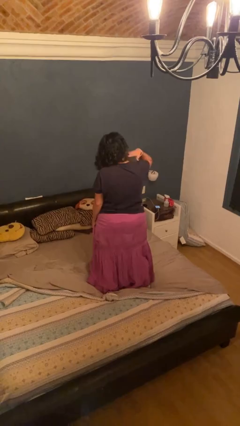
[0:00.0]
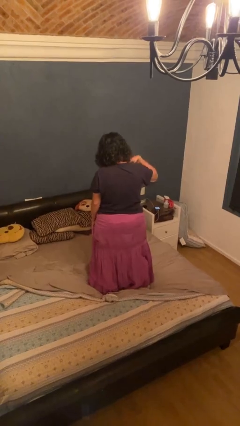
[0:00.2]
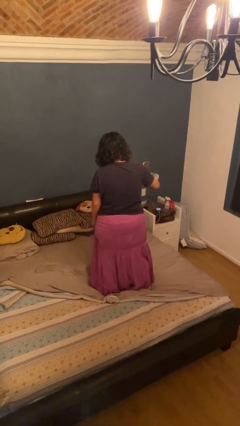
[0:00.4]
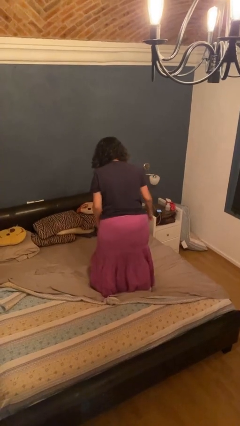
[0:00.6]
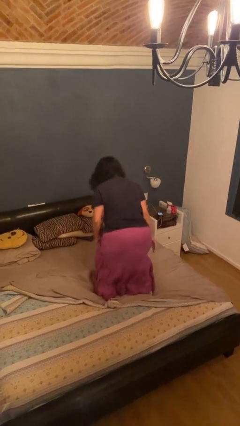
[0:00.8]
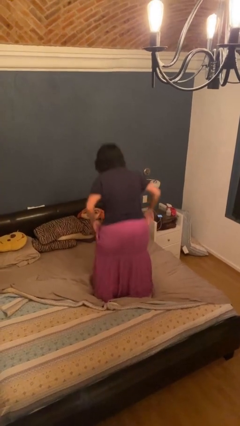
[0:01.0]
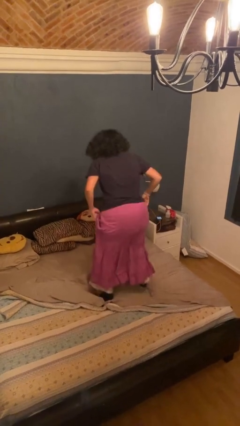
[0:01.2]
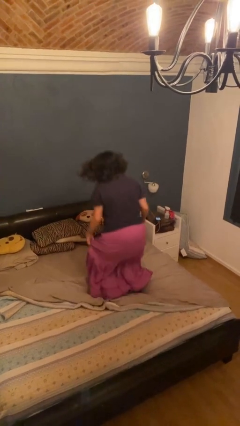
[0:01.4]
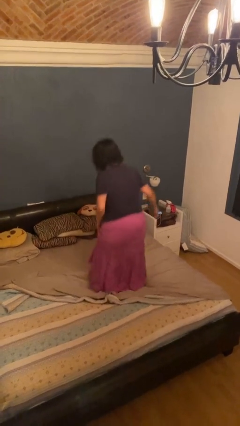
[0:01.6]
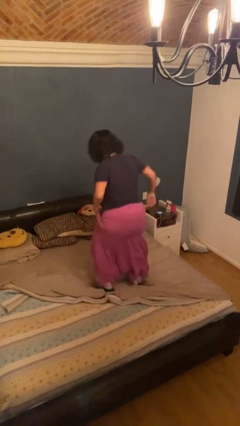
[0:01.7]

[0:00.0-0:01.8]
person jumps on bed

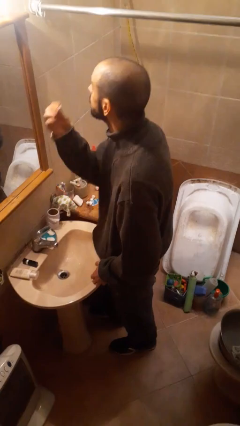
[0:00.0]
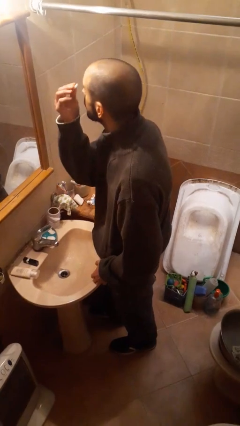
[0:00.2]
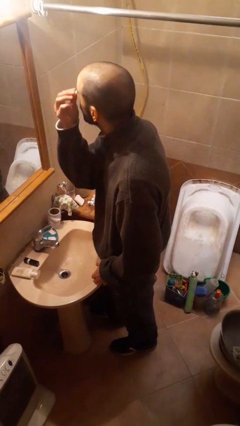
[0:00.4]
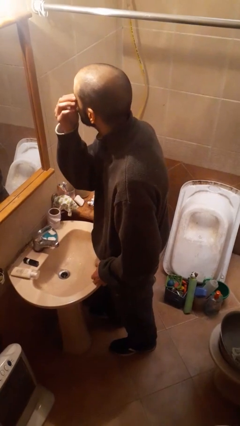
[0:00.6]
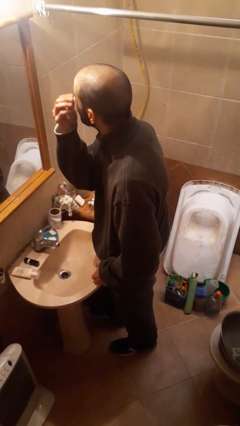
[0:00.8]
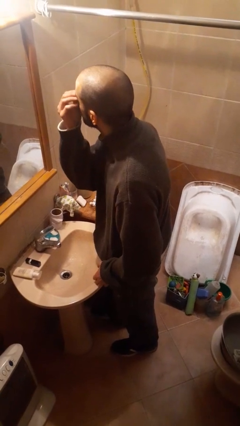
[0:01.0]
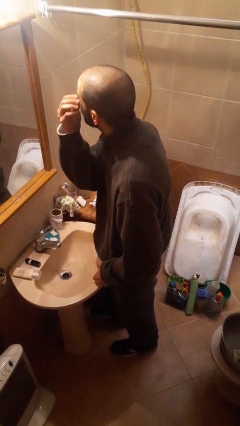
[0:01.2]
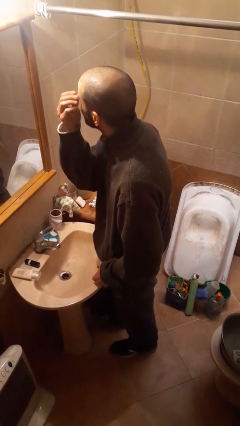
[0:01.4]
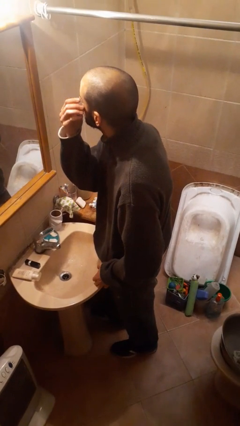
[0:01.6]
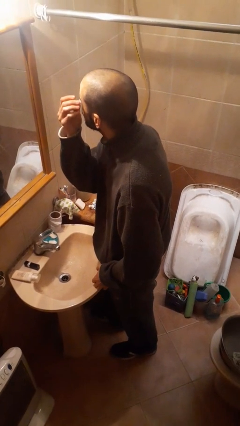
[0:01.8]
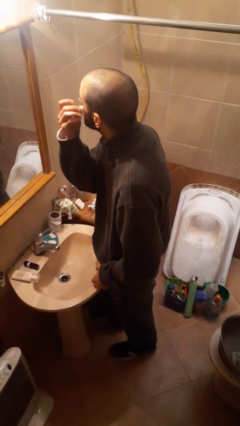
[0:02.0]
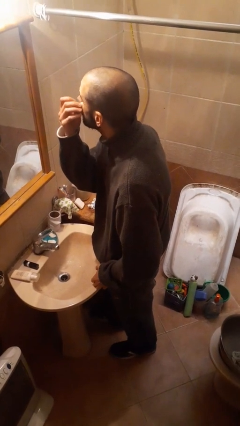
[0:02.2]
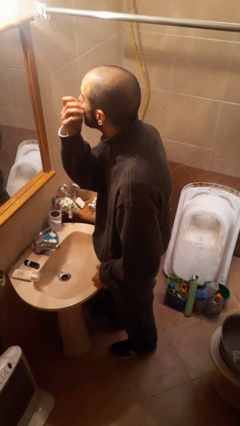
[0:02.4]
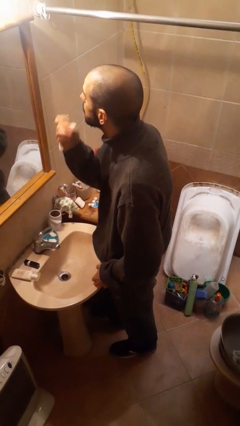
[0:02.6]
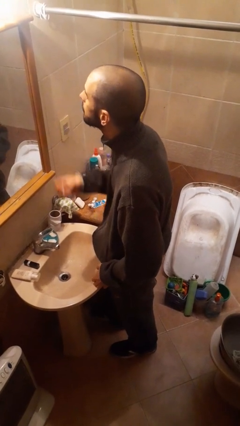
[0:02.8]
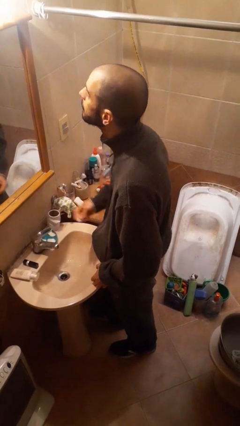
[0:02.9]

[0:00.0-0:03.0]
person applies eye makeup

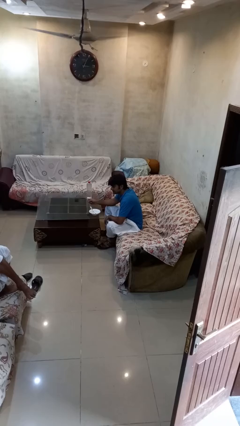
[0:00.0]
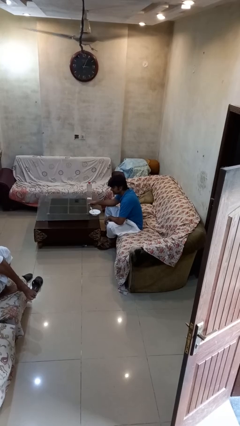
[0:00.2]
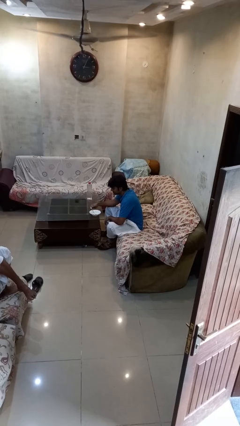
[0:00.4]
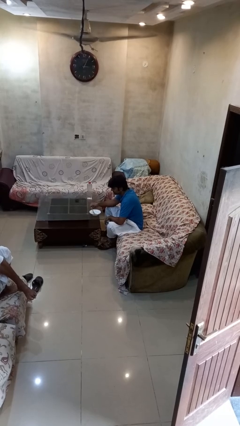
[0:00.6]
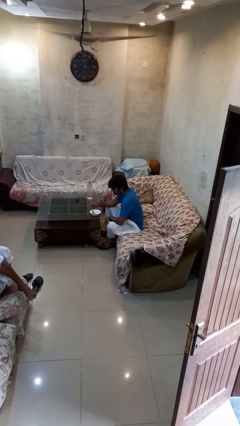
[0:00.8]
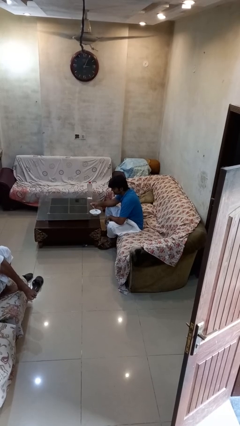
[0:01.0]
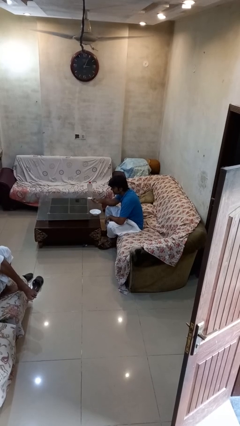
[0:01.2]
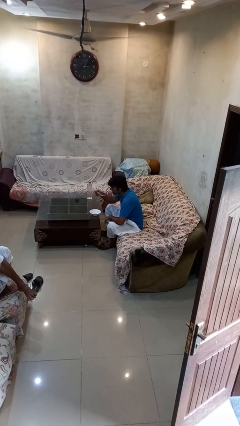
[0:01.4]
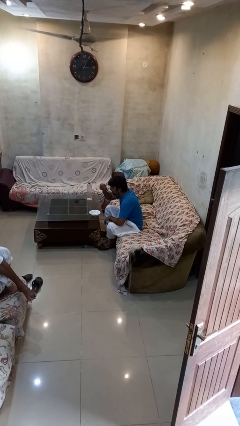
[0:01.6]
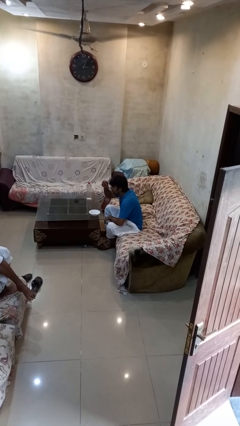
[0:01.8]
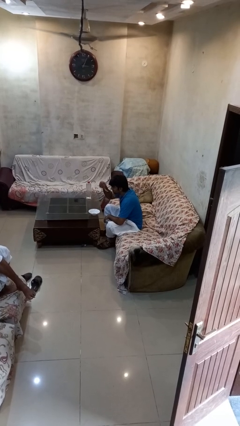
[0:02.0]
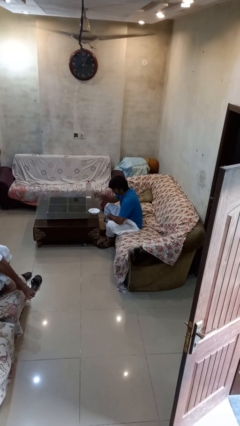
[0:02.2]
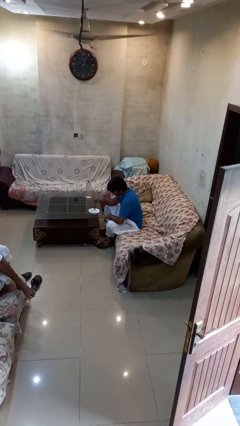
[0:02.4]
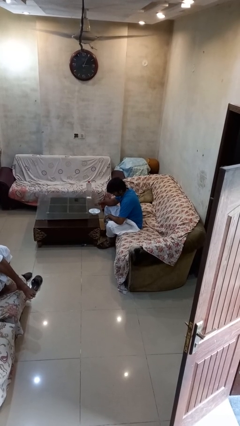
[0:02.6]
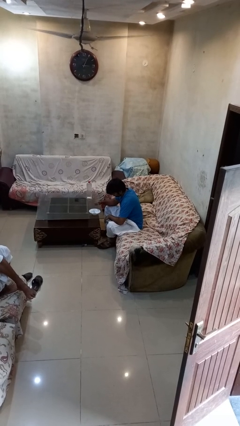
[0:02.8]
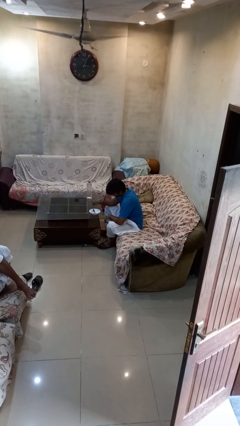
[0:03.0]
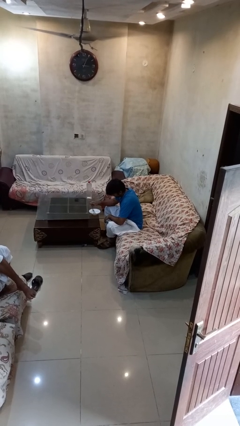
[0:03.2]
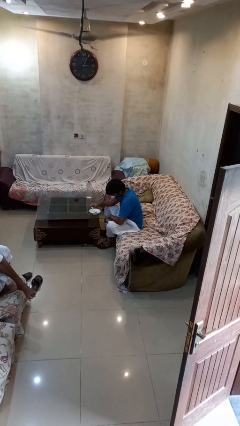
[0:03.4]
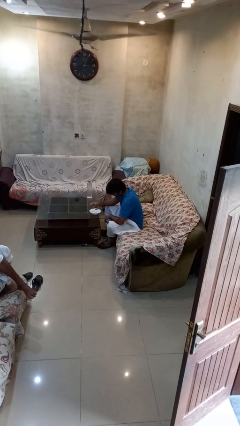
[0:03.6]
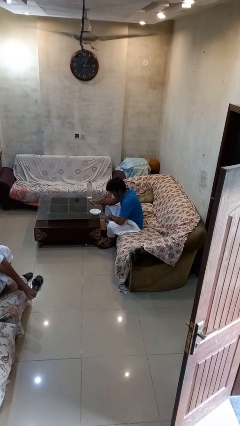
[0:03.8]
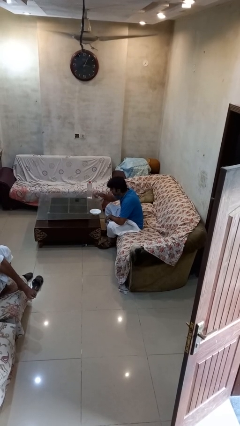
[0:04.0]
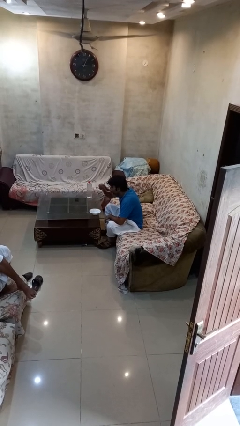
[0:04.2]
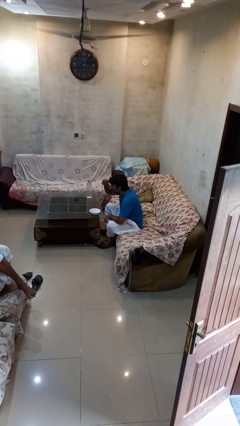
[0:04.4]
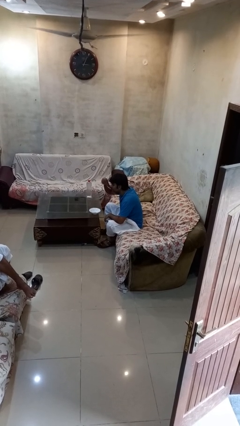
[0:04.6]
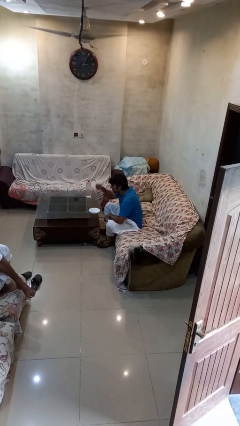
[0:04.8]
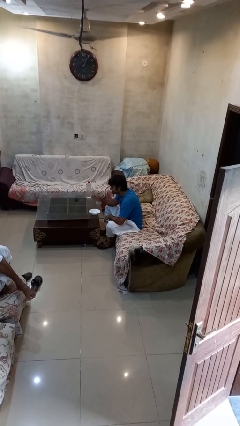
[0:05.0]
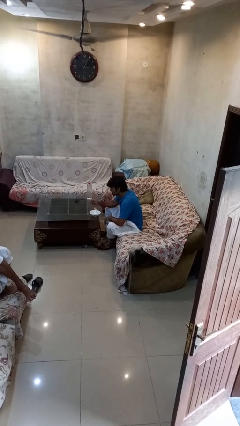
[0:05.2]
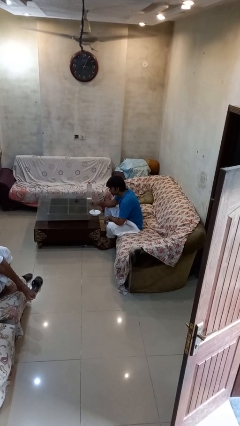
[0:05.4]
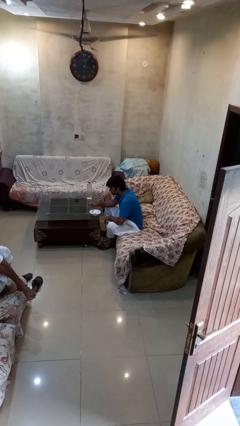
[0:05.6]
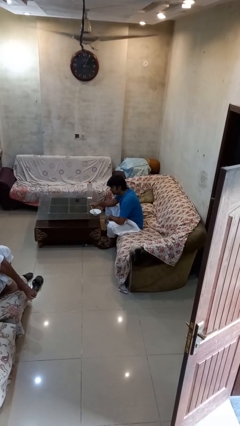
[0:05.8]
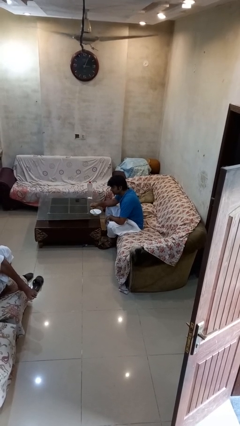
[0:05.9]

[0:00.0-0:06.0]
person eats with utensil

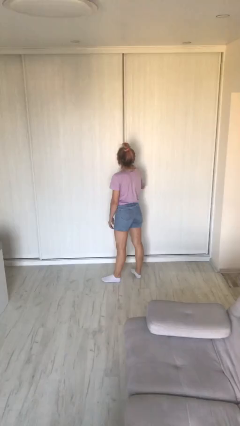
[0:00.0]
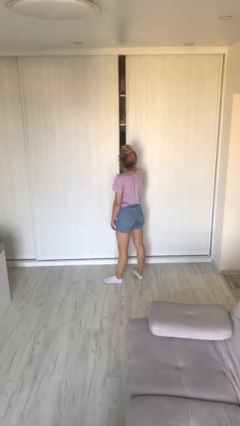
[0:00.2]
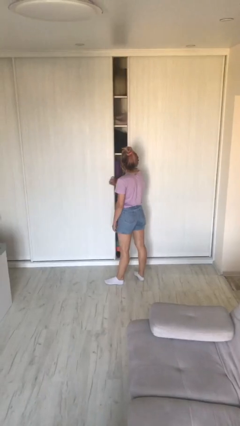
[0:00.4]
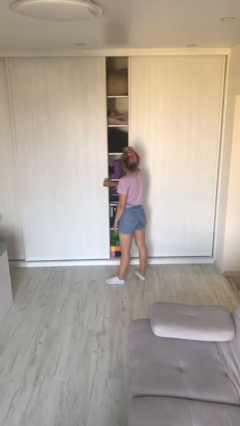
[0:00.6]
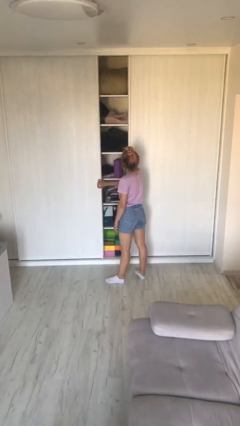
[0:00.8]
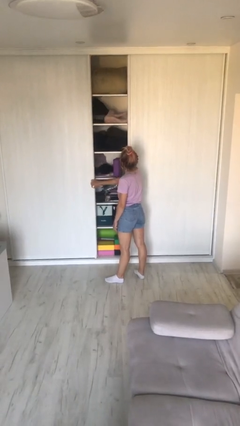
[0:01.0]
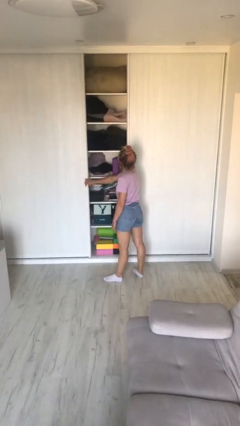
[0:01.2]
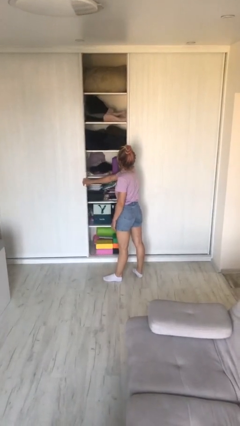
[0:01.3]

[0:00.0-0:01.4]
person opens sliding door

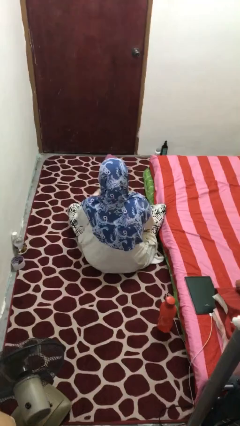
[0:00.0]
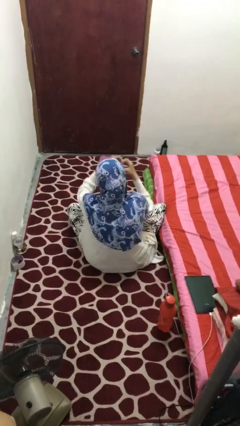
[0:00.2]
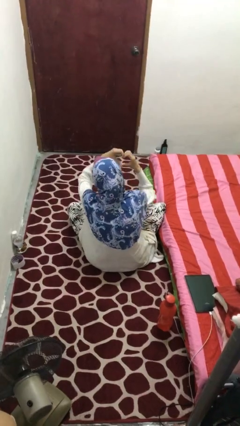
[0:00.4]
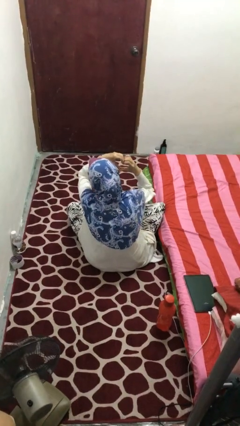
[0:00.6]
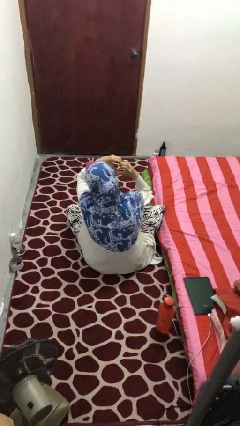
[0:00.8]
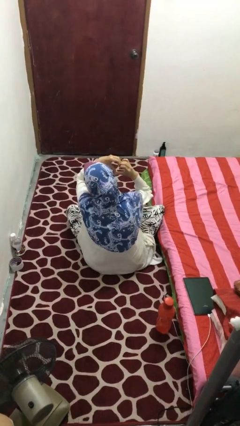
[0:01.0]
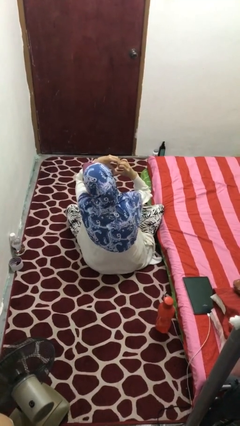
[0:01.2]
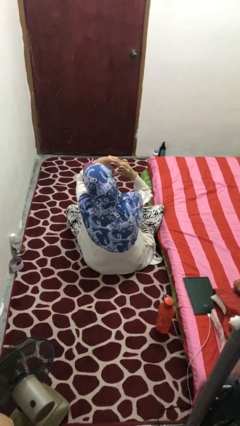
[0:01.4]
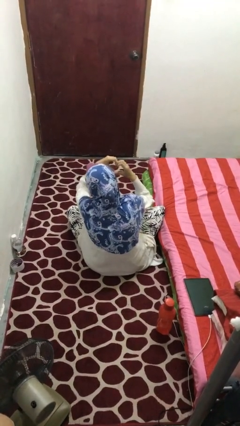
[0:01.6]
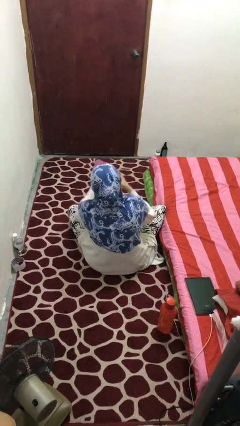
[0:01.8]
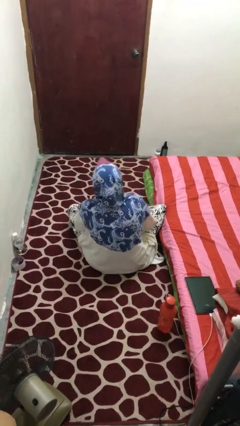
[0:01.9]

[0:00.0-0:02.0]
person gestures heart

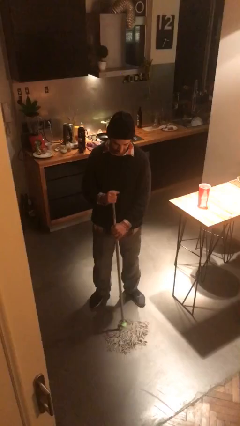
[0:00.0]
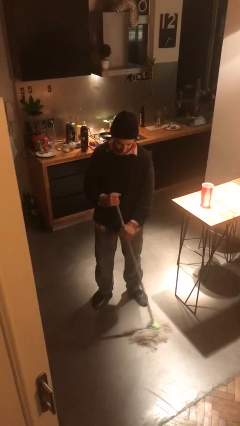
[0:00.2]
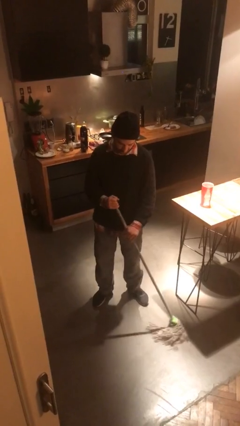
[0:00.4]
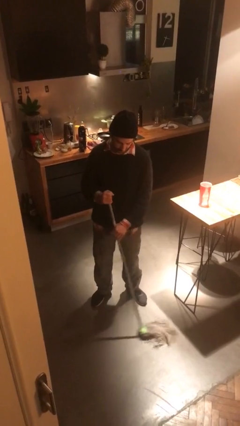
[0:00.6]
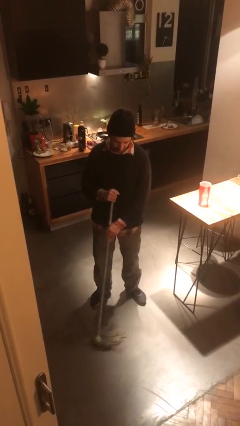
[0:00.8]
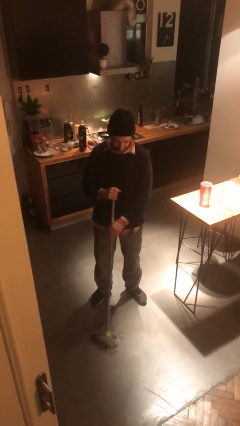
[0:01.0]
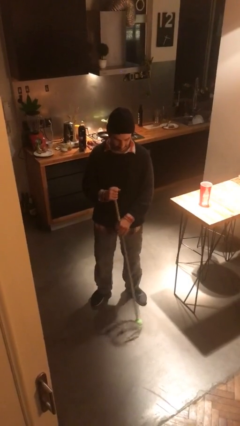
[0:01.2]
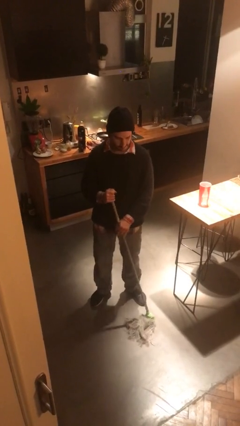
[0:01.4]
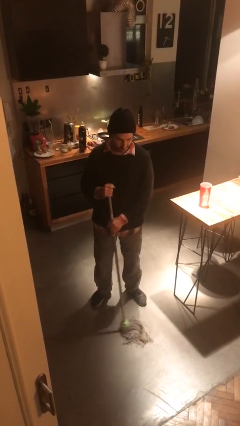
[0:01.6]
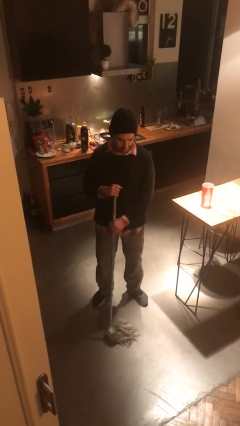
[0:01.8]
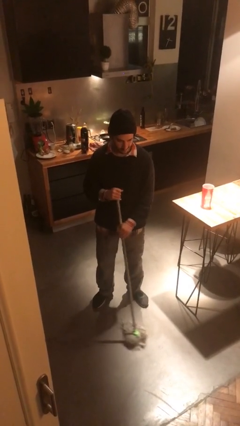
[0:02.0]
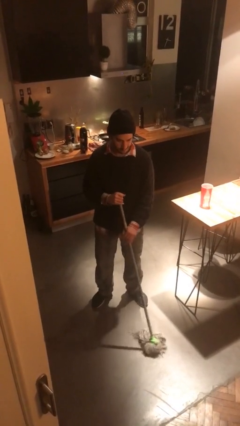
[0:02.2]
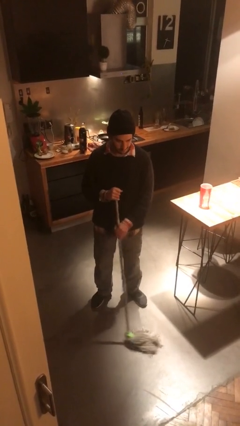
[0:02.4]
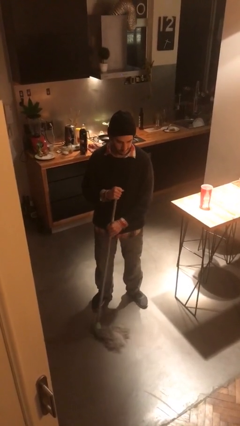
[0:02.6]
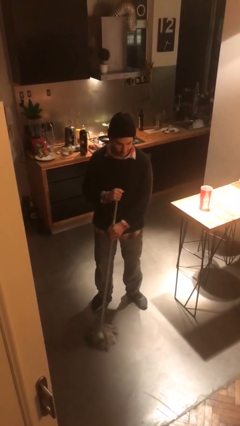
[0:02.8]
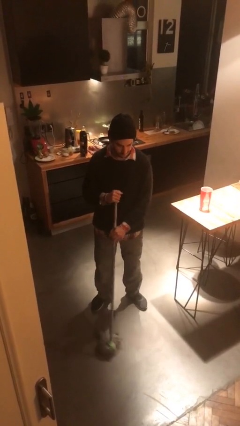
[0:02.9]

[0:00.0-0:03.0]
person mops

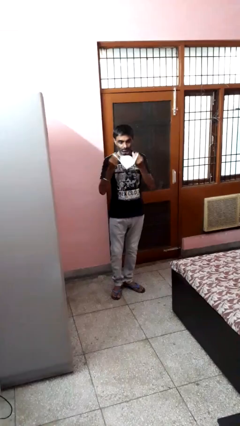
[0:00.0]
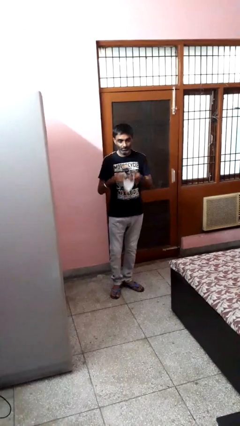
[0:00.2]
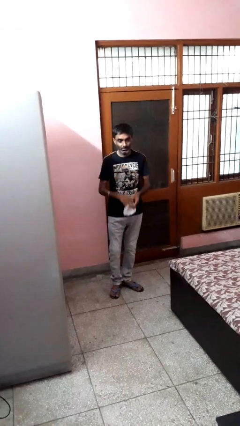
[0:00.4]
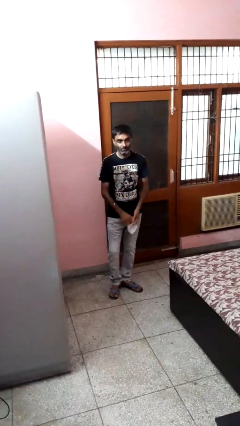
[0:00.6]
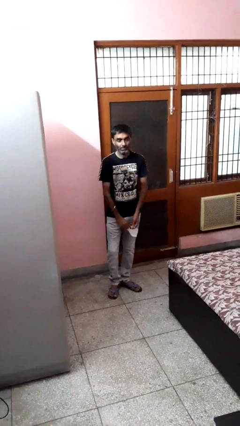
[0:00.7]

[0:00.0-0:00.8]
person takes off facemask
